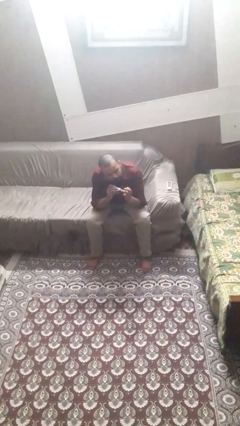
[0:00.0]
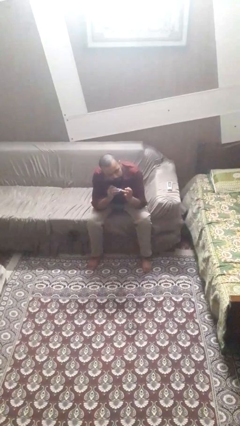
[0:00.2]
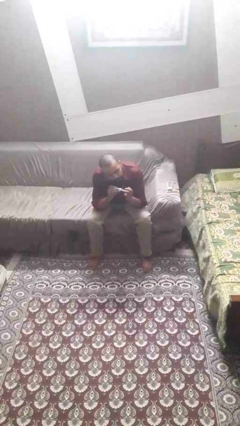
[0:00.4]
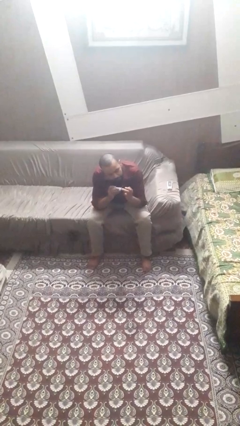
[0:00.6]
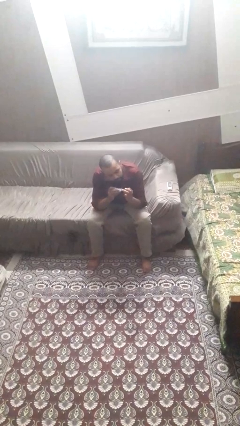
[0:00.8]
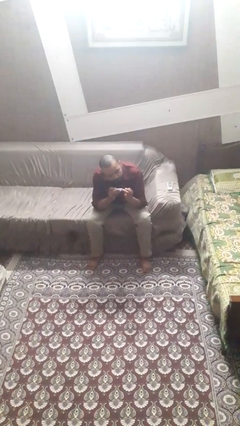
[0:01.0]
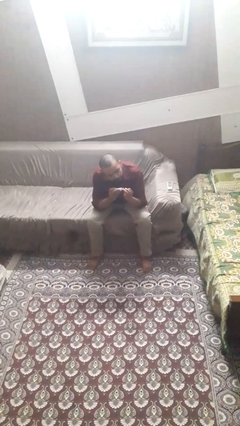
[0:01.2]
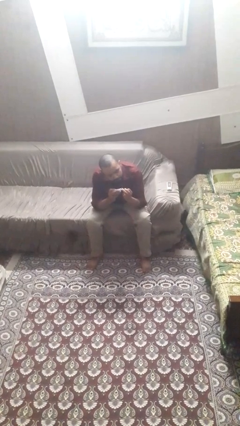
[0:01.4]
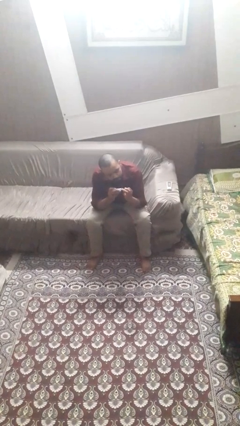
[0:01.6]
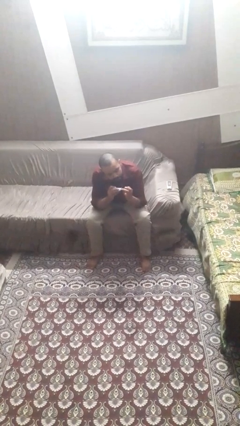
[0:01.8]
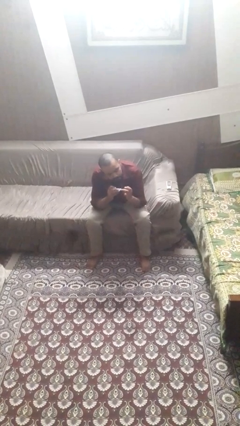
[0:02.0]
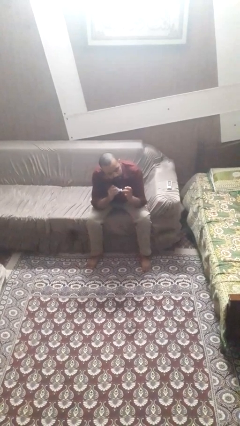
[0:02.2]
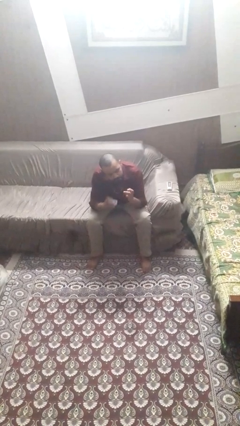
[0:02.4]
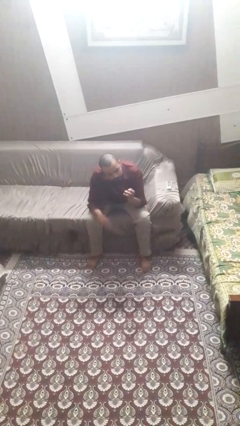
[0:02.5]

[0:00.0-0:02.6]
person clips fingernails

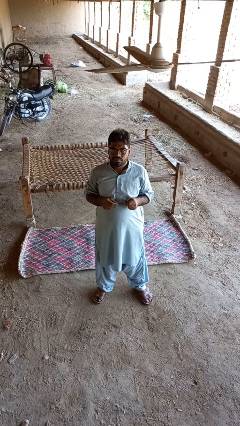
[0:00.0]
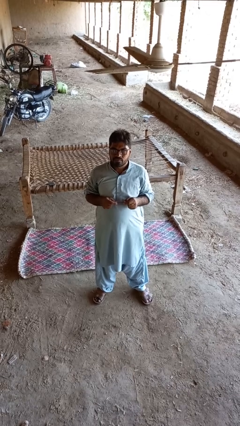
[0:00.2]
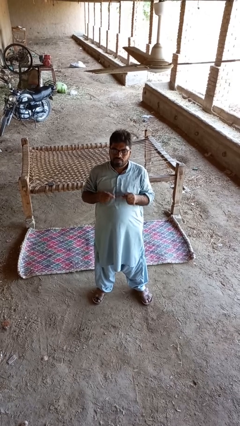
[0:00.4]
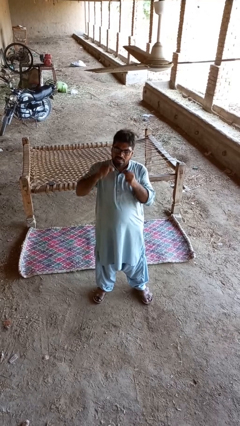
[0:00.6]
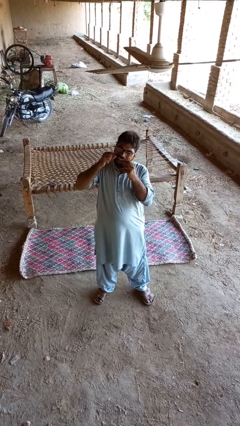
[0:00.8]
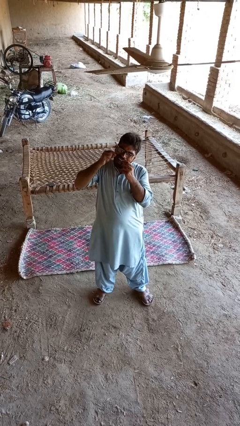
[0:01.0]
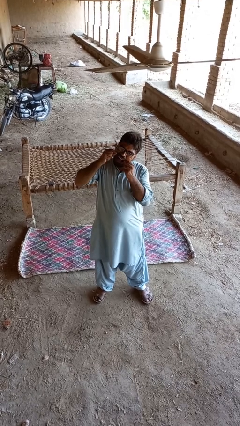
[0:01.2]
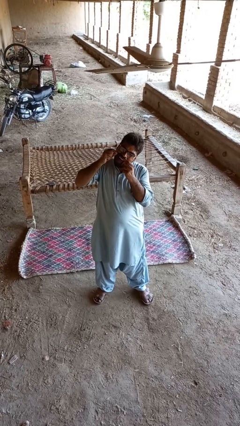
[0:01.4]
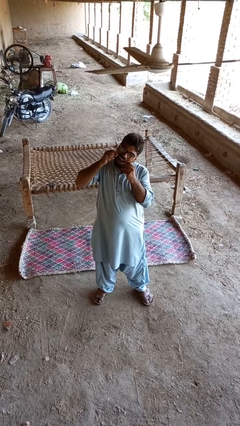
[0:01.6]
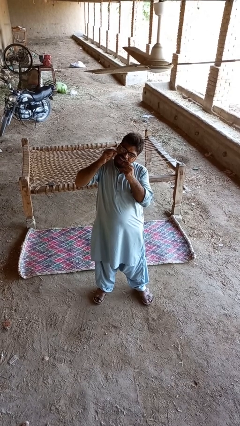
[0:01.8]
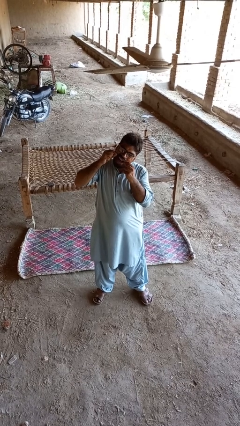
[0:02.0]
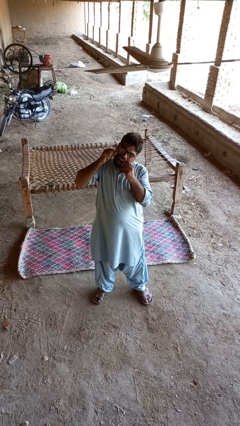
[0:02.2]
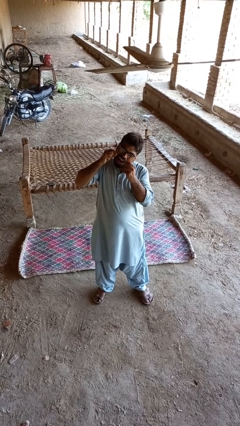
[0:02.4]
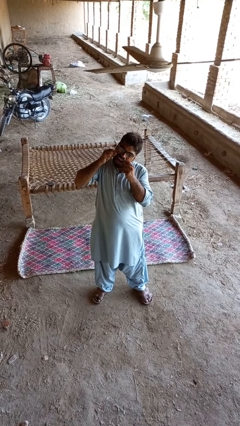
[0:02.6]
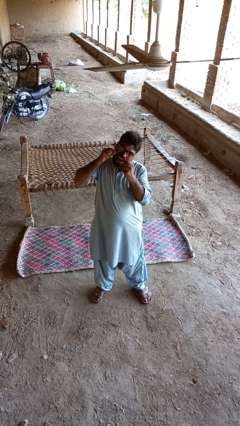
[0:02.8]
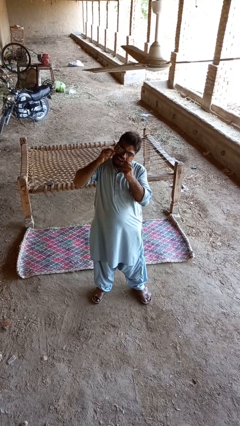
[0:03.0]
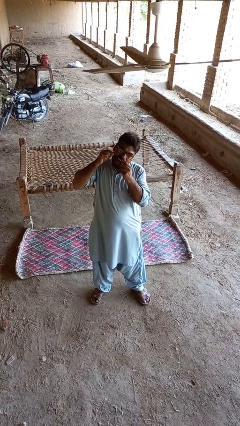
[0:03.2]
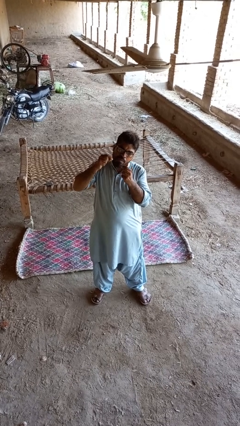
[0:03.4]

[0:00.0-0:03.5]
person flosses

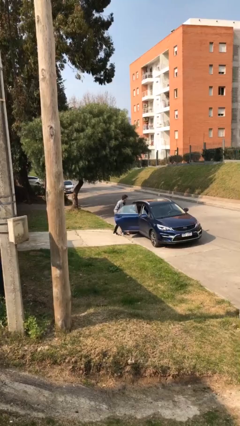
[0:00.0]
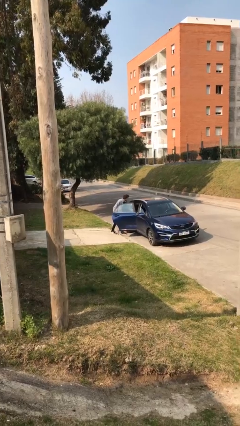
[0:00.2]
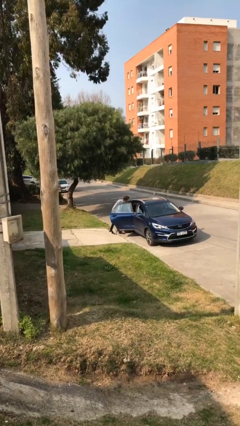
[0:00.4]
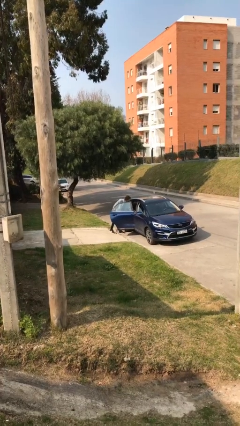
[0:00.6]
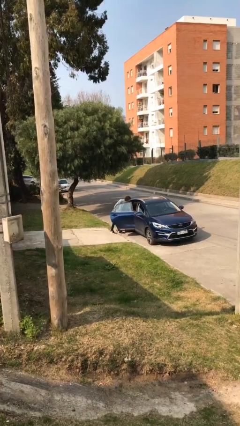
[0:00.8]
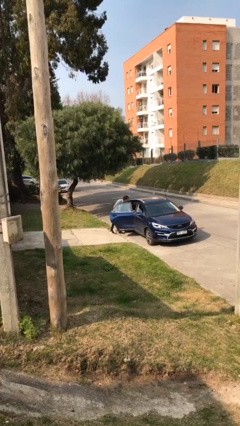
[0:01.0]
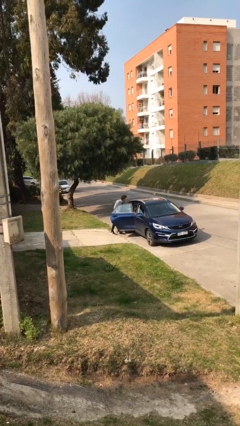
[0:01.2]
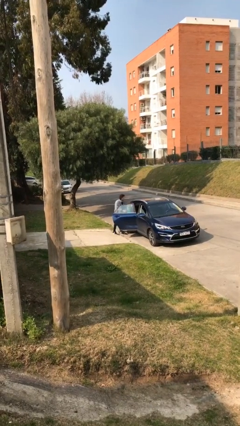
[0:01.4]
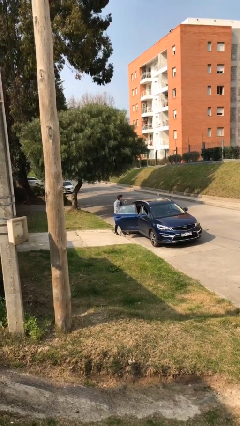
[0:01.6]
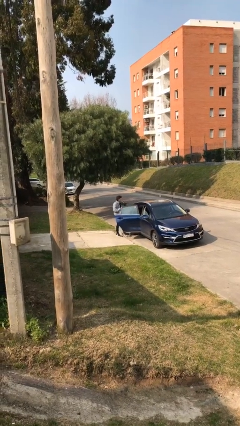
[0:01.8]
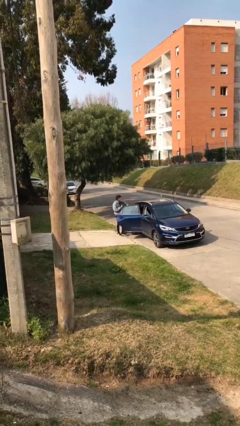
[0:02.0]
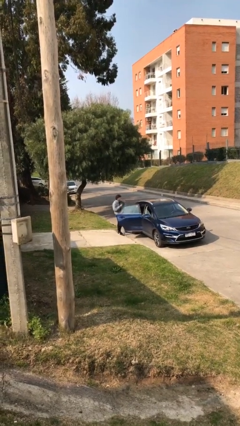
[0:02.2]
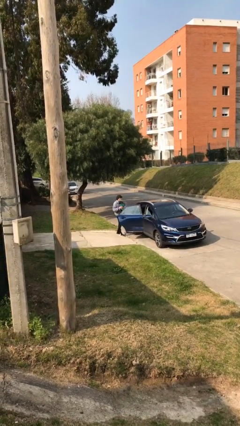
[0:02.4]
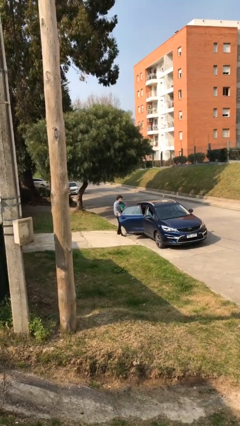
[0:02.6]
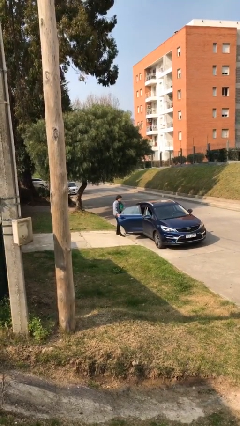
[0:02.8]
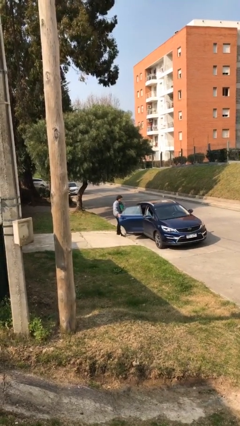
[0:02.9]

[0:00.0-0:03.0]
person unloads car

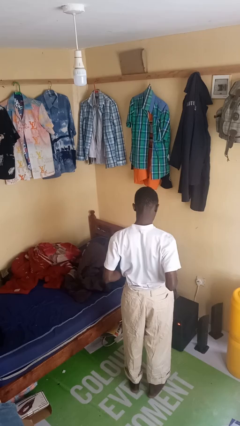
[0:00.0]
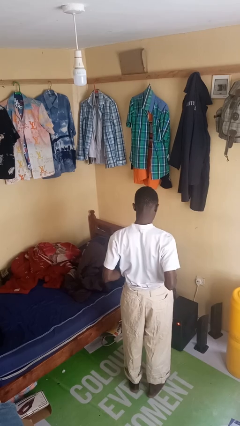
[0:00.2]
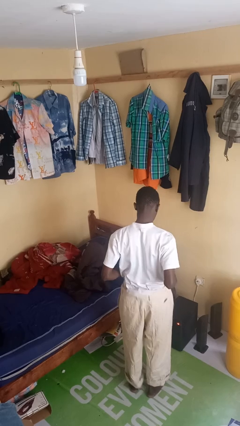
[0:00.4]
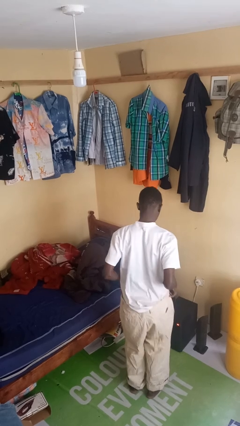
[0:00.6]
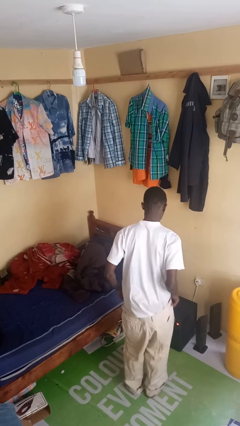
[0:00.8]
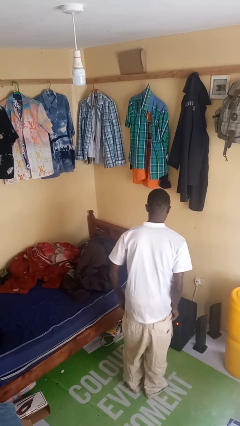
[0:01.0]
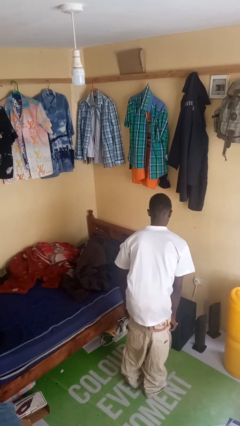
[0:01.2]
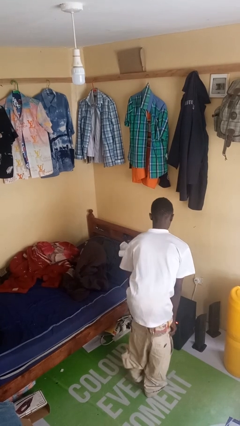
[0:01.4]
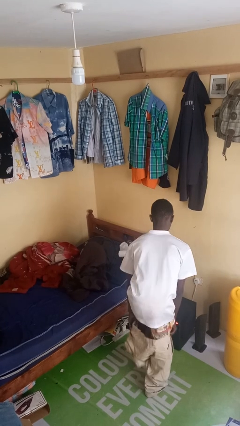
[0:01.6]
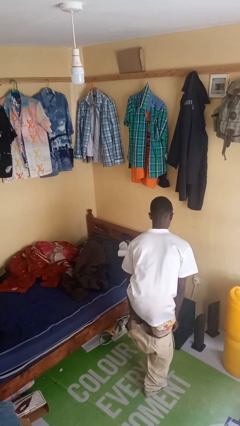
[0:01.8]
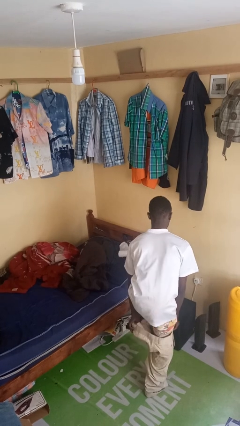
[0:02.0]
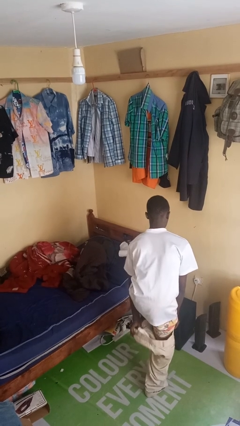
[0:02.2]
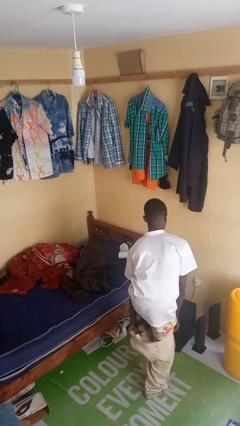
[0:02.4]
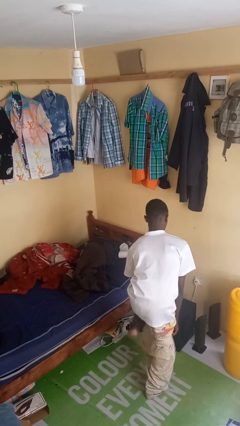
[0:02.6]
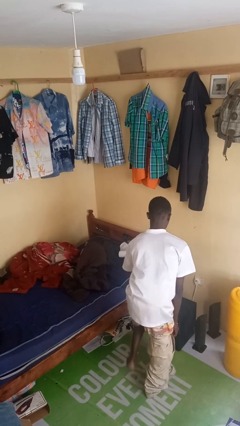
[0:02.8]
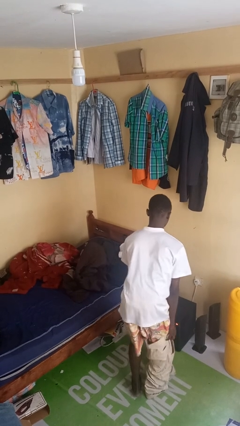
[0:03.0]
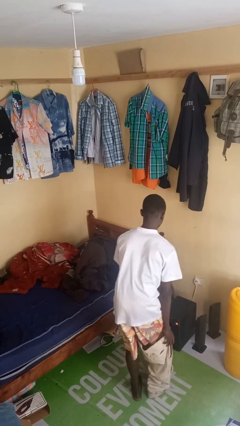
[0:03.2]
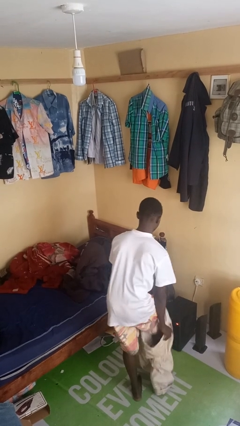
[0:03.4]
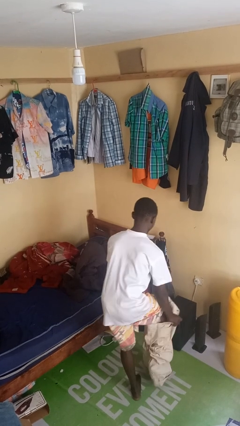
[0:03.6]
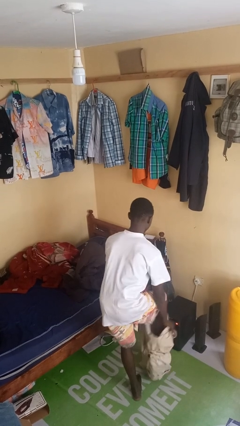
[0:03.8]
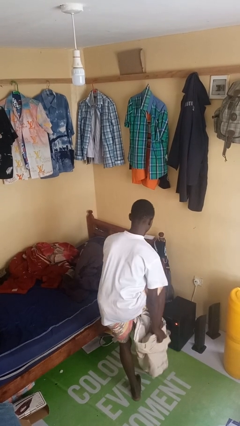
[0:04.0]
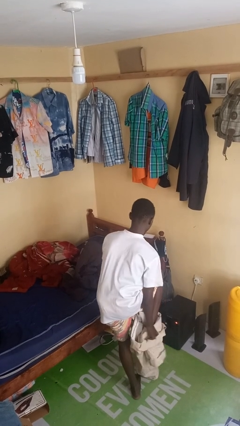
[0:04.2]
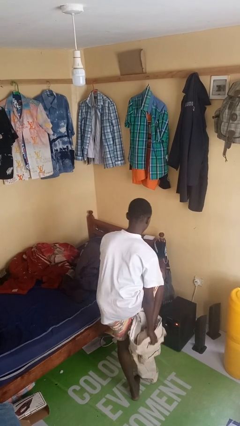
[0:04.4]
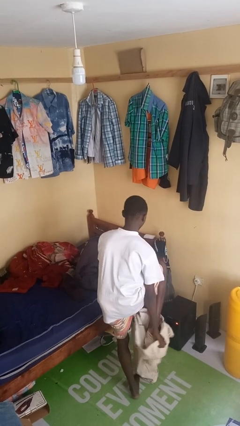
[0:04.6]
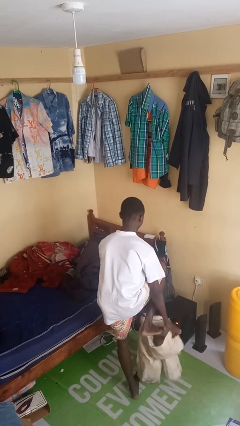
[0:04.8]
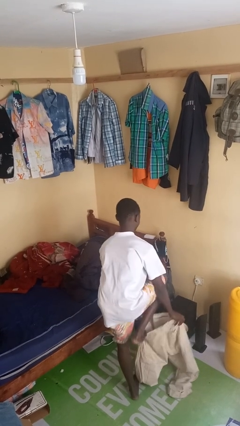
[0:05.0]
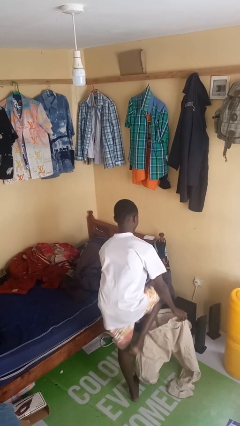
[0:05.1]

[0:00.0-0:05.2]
person takes off pants

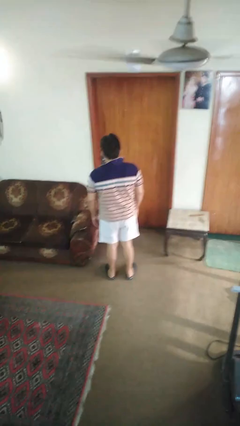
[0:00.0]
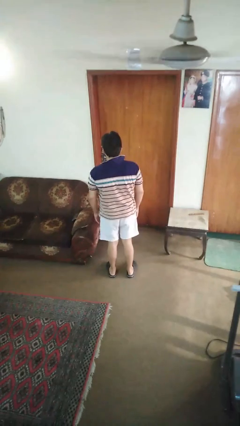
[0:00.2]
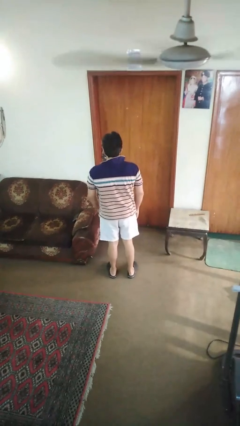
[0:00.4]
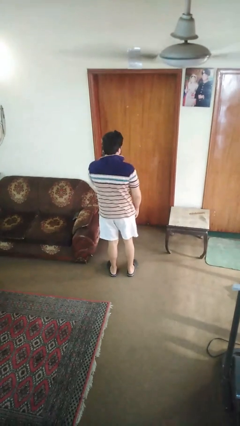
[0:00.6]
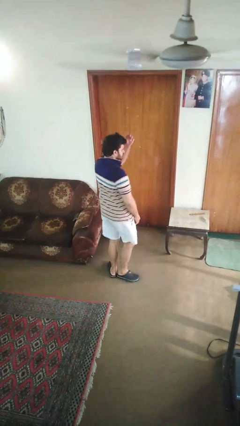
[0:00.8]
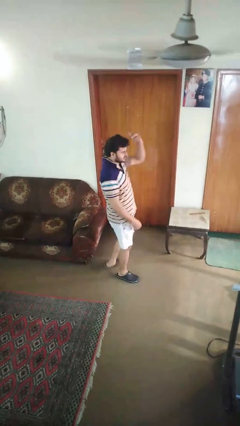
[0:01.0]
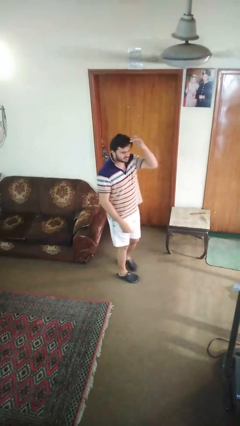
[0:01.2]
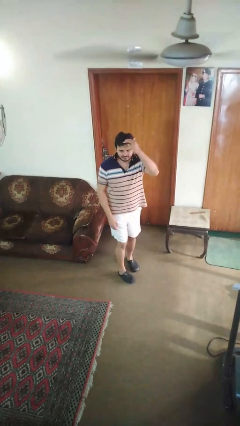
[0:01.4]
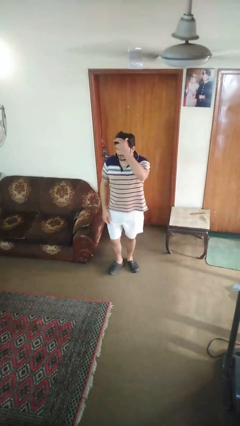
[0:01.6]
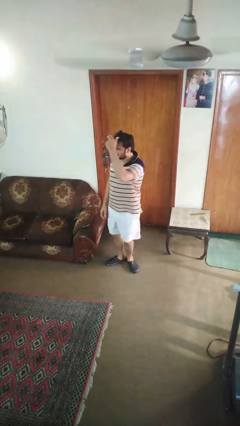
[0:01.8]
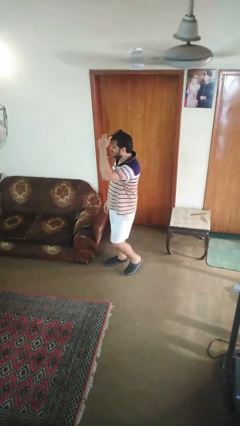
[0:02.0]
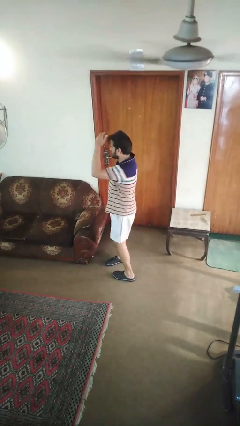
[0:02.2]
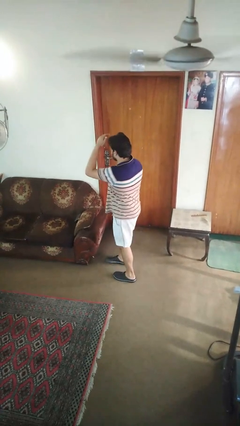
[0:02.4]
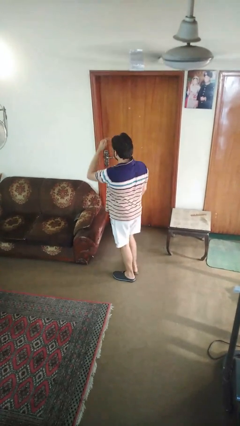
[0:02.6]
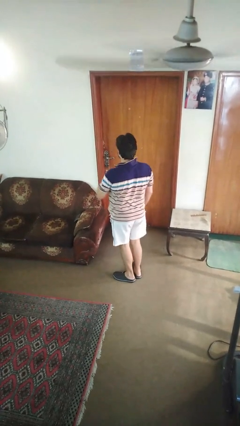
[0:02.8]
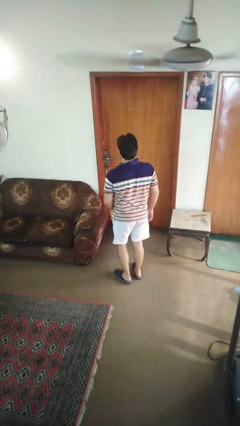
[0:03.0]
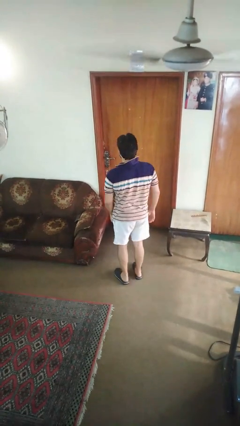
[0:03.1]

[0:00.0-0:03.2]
person twirls
